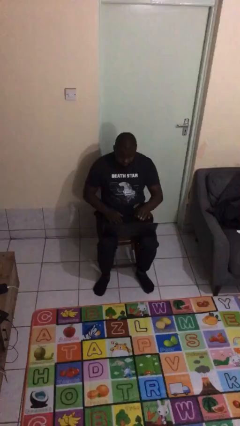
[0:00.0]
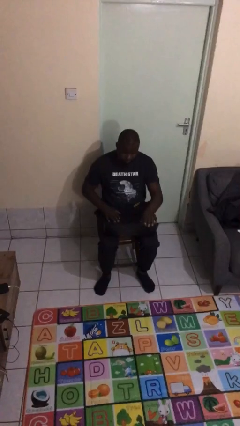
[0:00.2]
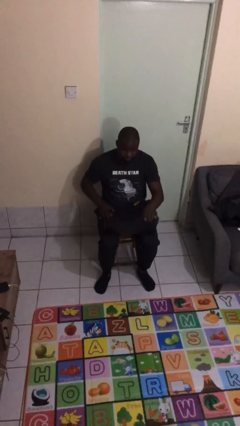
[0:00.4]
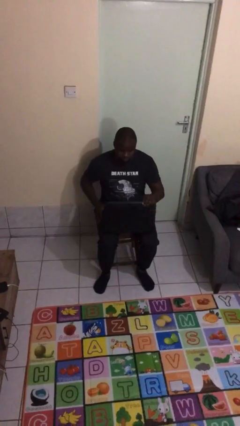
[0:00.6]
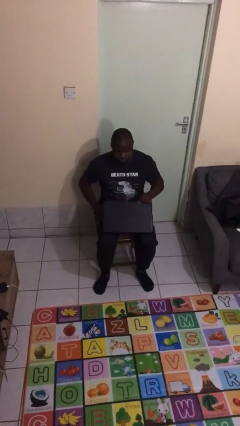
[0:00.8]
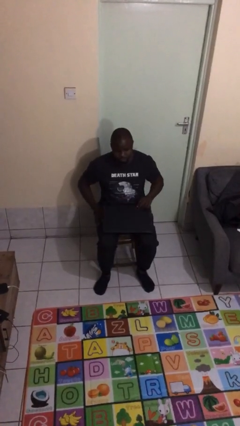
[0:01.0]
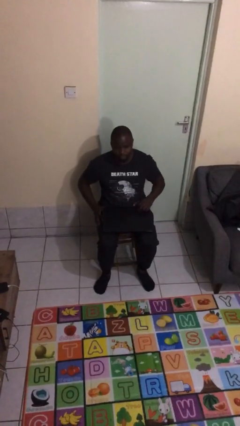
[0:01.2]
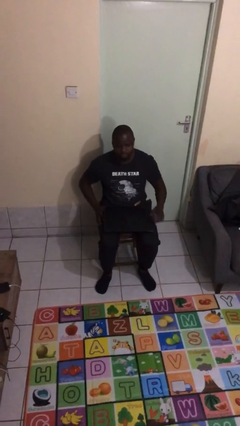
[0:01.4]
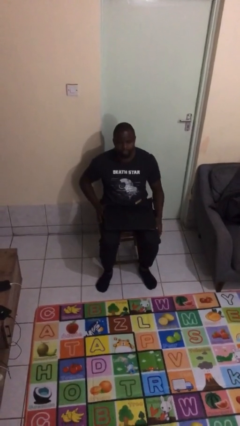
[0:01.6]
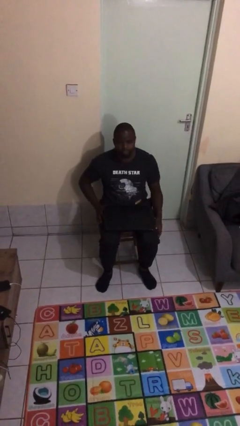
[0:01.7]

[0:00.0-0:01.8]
person closes laptop

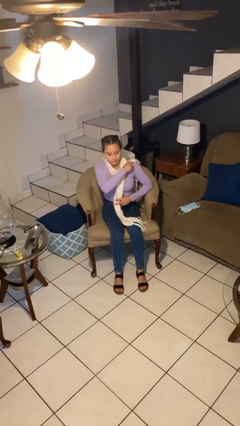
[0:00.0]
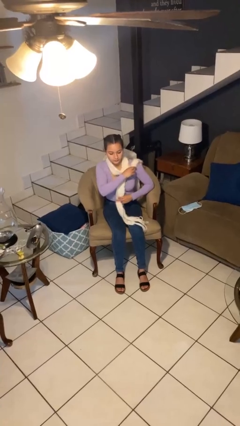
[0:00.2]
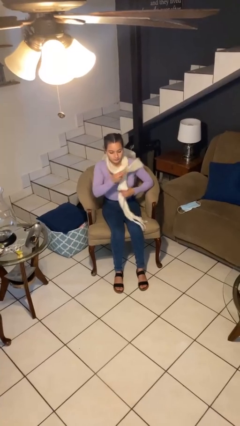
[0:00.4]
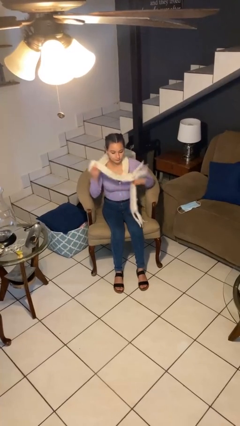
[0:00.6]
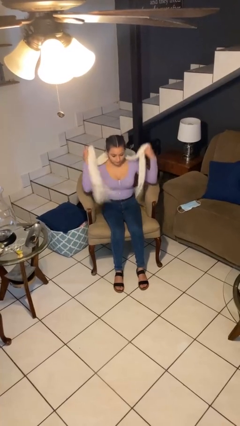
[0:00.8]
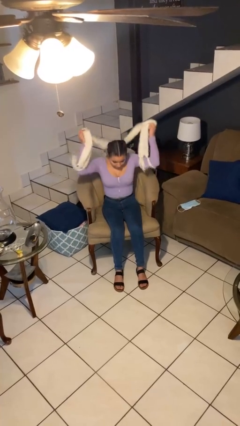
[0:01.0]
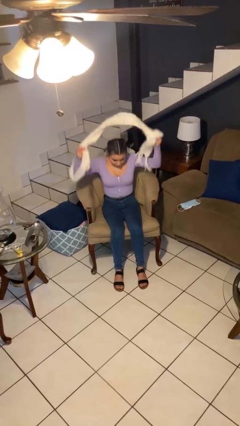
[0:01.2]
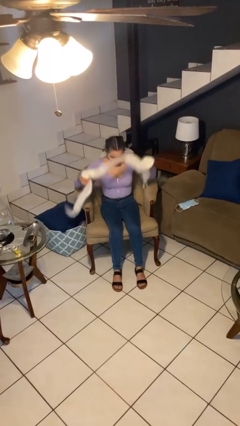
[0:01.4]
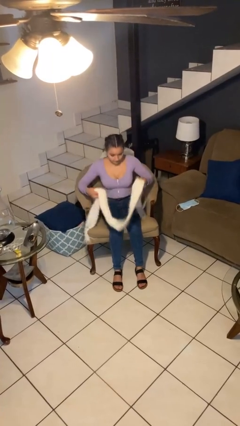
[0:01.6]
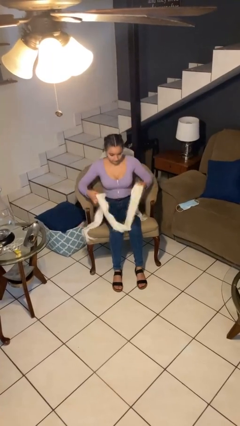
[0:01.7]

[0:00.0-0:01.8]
person takes off scarf

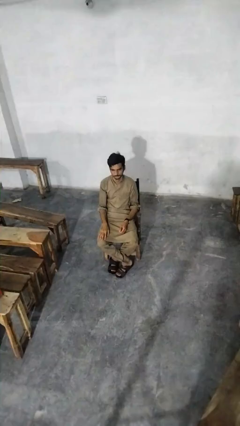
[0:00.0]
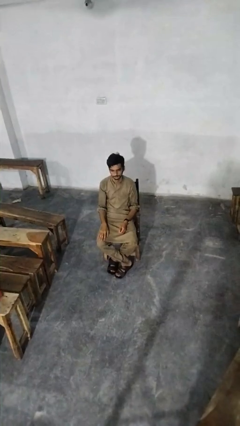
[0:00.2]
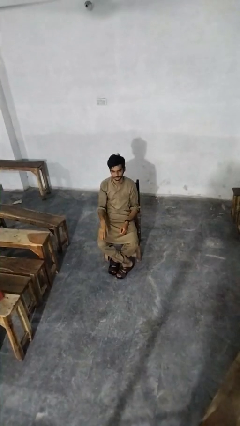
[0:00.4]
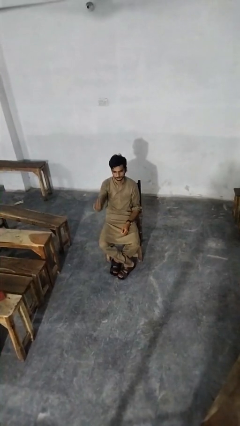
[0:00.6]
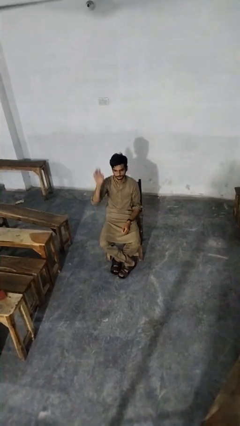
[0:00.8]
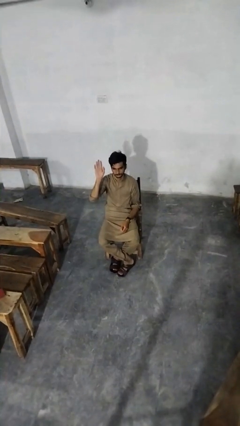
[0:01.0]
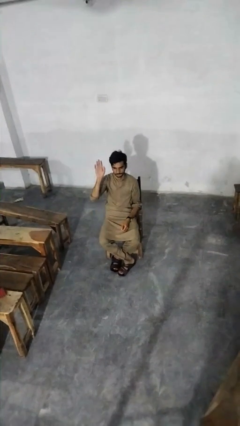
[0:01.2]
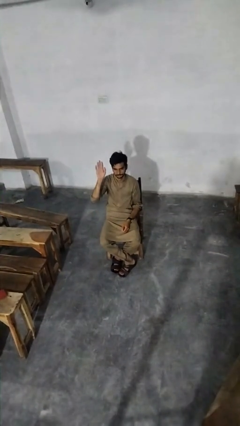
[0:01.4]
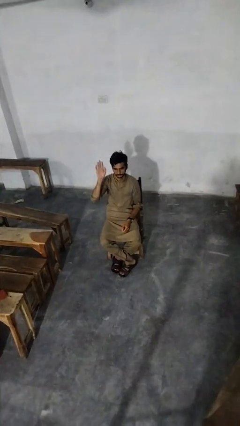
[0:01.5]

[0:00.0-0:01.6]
person gestures raise hand

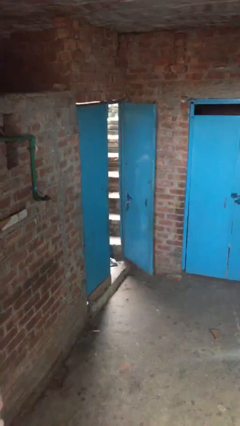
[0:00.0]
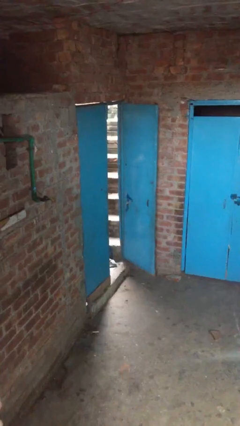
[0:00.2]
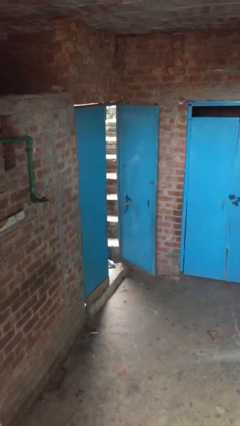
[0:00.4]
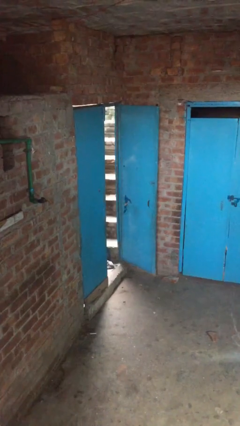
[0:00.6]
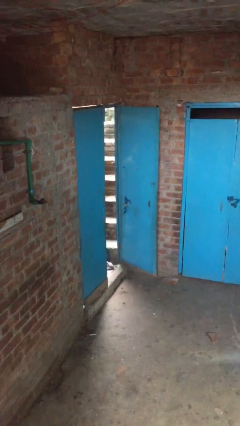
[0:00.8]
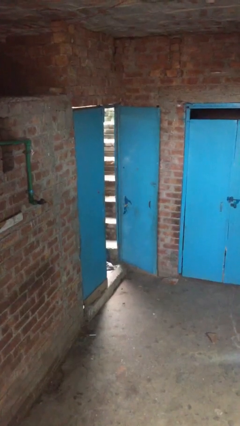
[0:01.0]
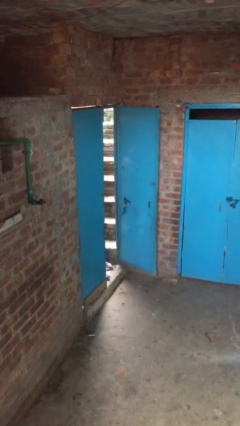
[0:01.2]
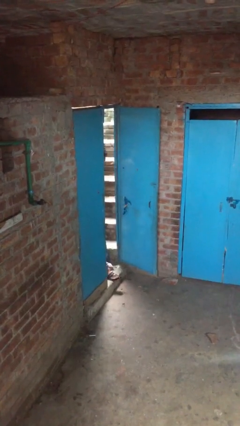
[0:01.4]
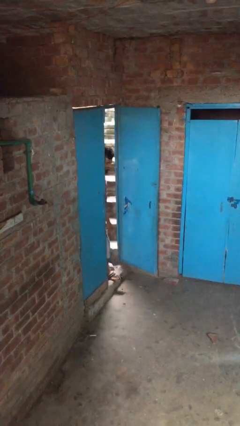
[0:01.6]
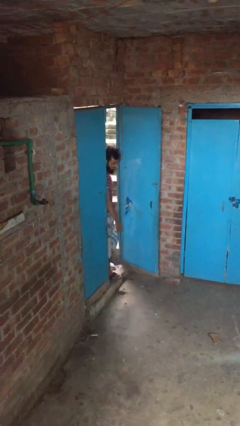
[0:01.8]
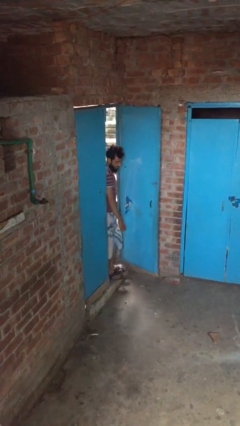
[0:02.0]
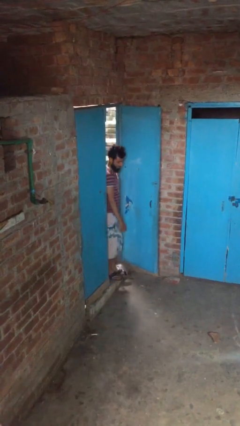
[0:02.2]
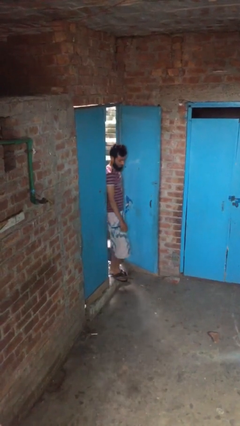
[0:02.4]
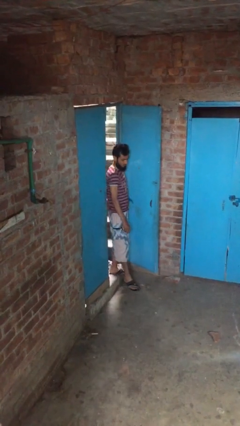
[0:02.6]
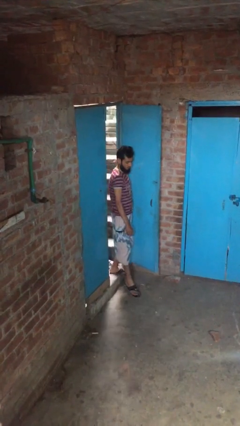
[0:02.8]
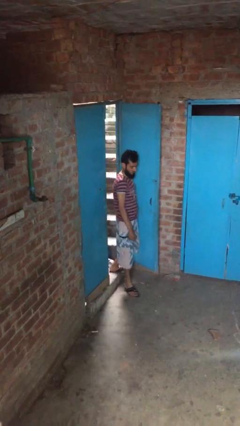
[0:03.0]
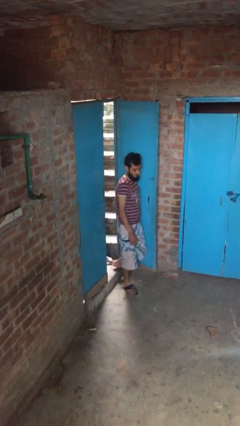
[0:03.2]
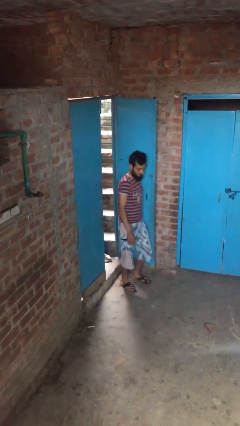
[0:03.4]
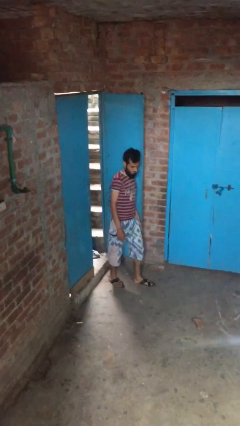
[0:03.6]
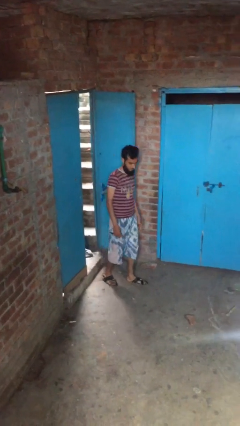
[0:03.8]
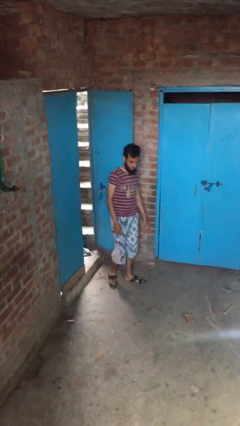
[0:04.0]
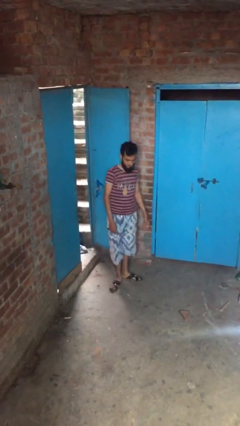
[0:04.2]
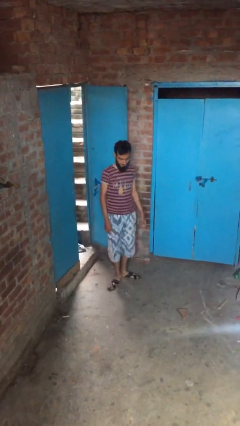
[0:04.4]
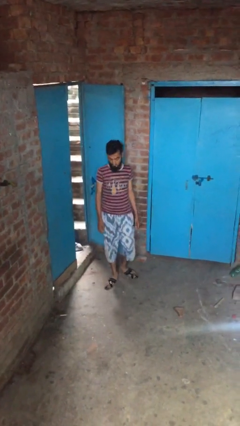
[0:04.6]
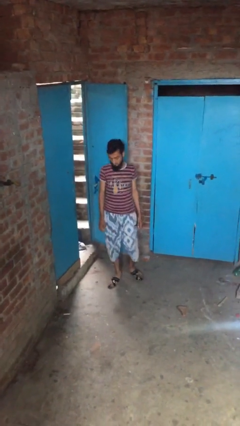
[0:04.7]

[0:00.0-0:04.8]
person enters scene through structure

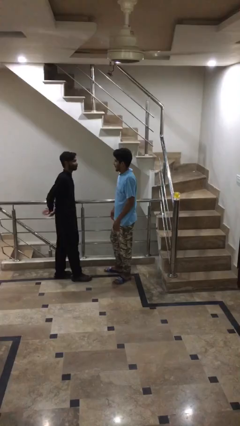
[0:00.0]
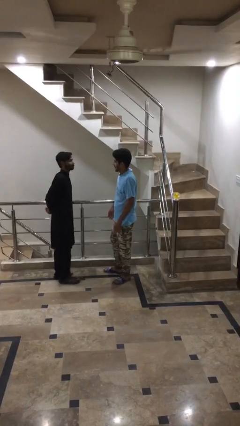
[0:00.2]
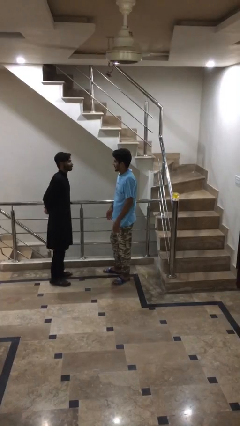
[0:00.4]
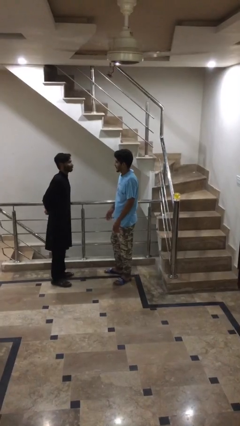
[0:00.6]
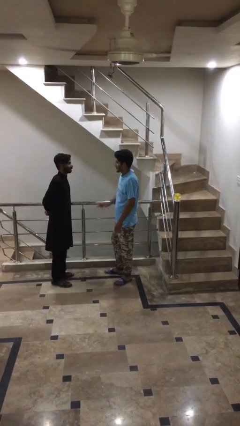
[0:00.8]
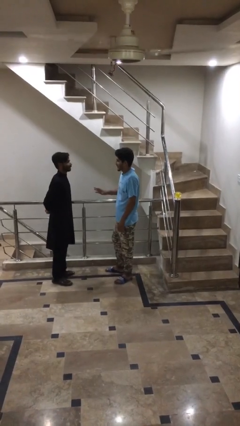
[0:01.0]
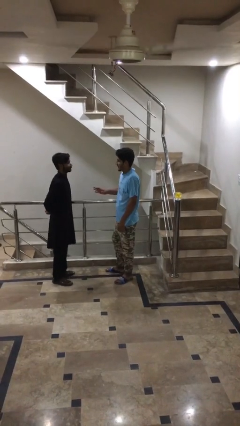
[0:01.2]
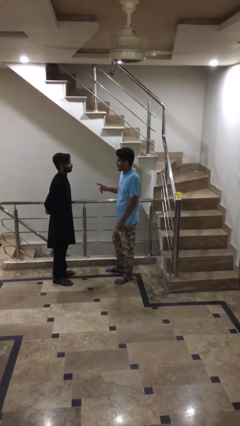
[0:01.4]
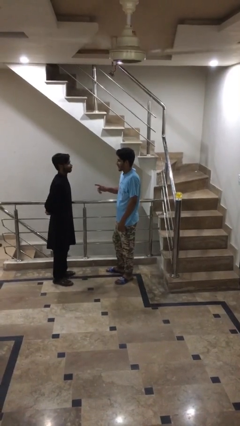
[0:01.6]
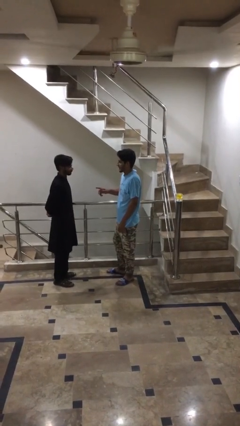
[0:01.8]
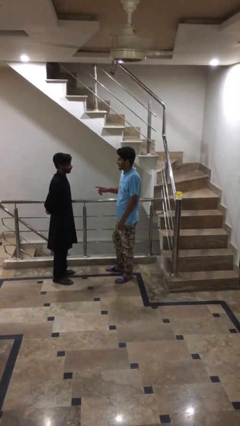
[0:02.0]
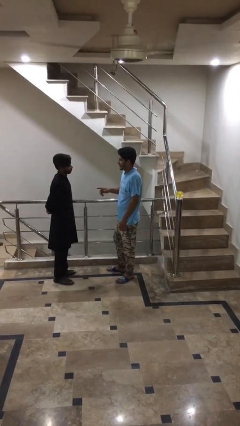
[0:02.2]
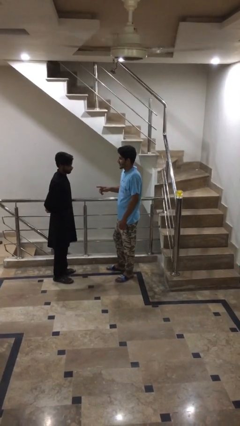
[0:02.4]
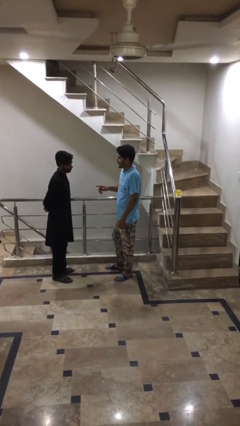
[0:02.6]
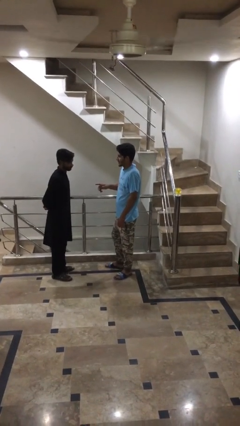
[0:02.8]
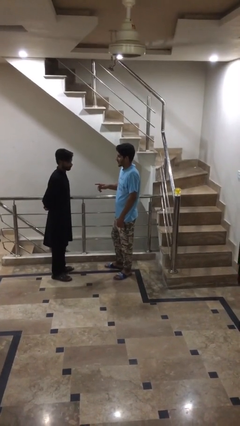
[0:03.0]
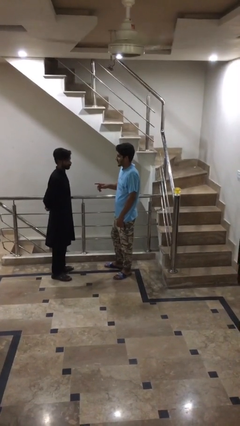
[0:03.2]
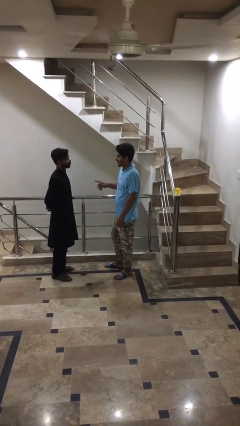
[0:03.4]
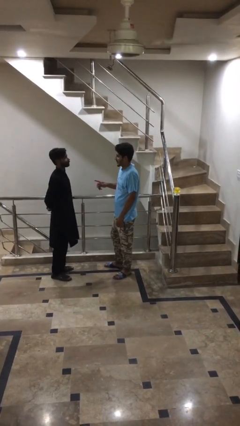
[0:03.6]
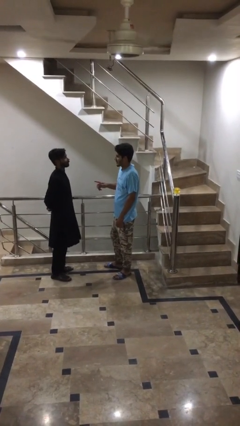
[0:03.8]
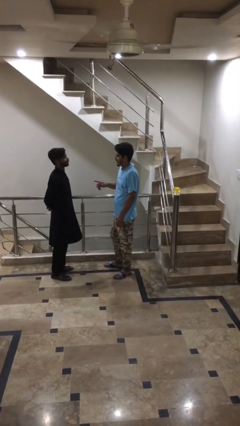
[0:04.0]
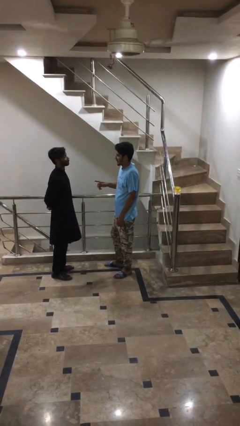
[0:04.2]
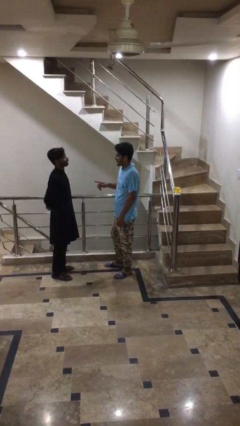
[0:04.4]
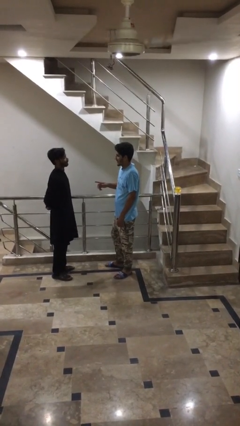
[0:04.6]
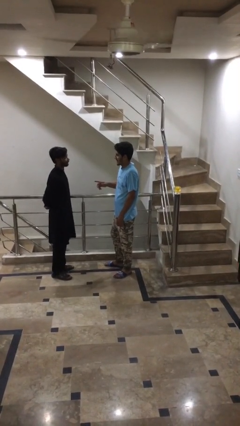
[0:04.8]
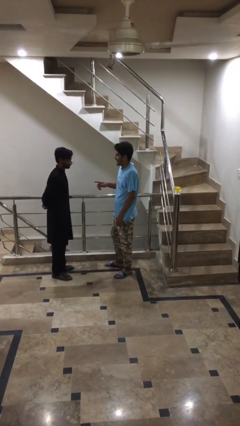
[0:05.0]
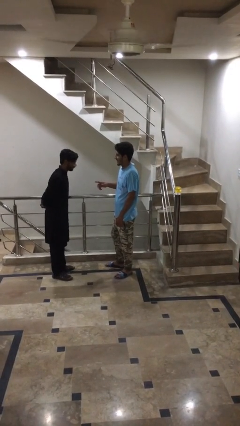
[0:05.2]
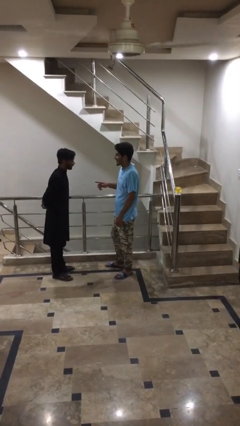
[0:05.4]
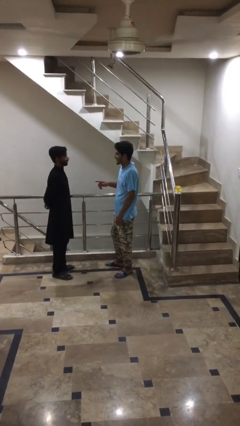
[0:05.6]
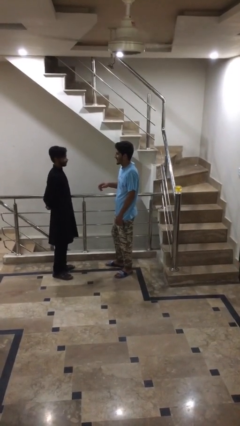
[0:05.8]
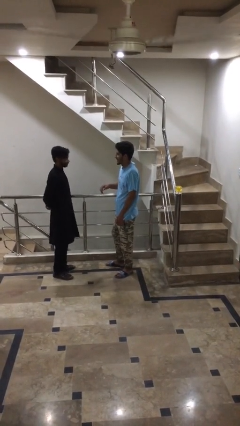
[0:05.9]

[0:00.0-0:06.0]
person talks to person

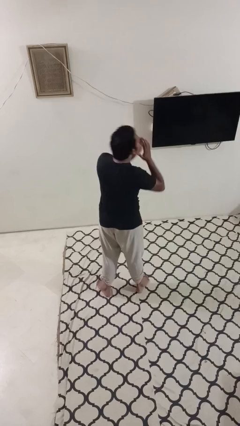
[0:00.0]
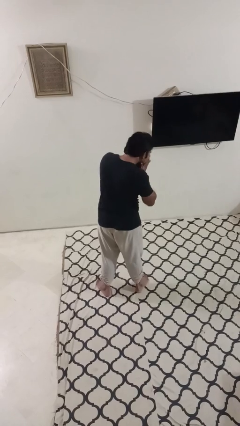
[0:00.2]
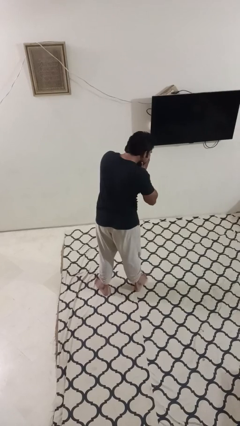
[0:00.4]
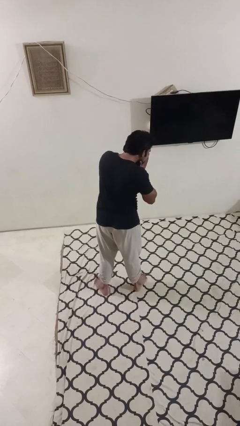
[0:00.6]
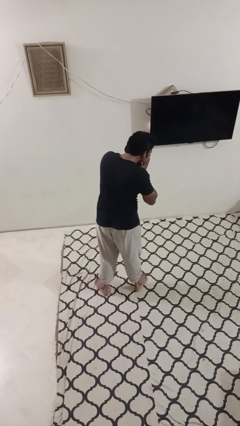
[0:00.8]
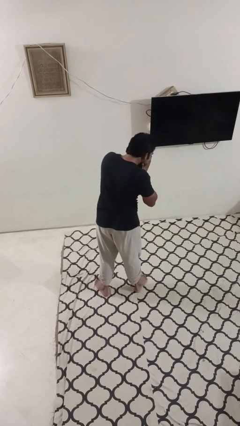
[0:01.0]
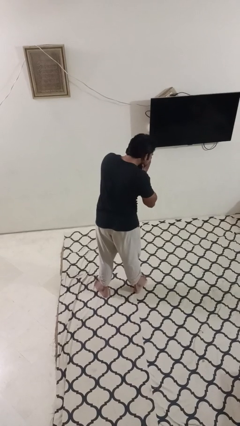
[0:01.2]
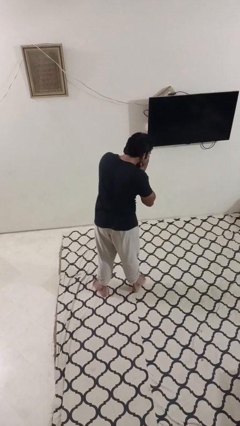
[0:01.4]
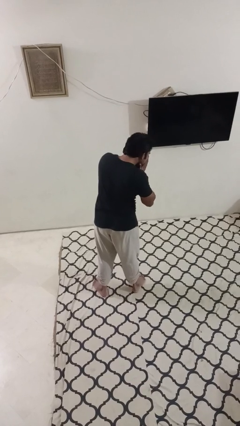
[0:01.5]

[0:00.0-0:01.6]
person sneezes into hand

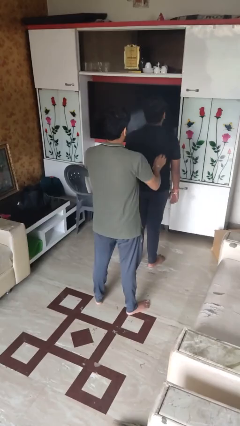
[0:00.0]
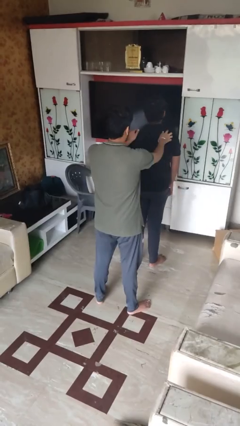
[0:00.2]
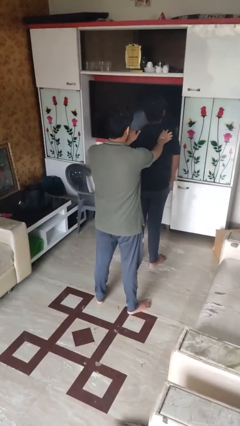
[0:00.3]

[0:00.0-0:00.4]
person grabs person by shoulder
